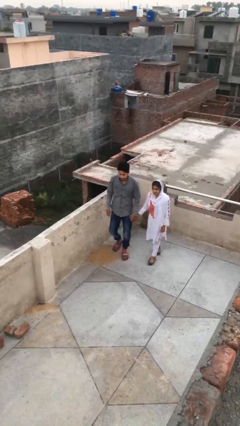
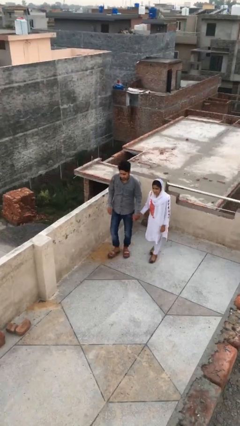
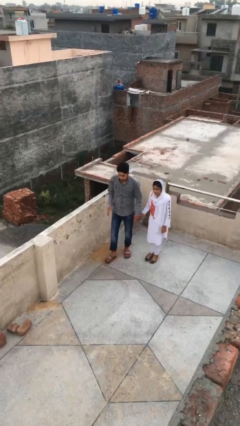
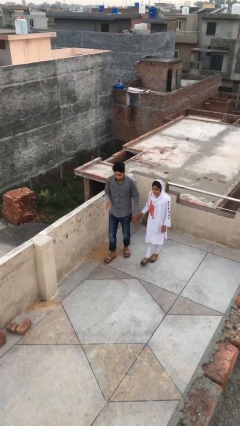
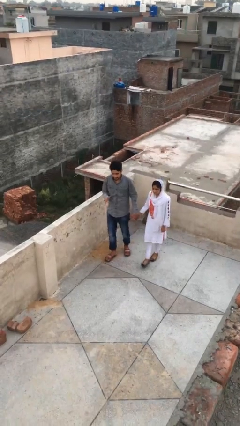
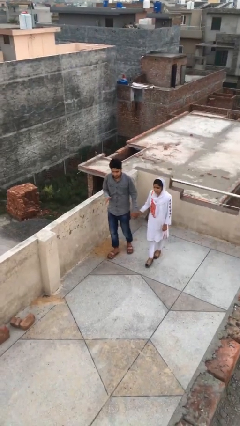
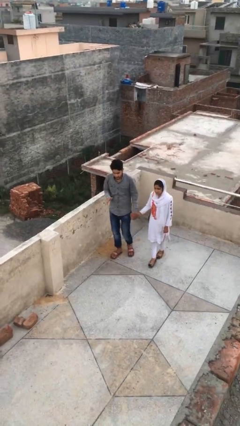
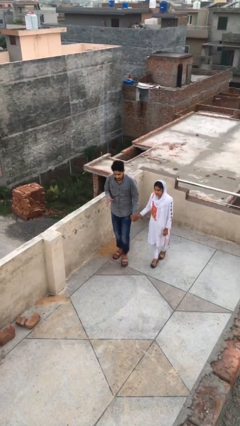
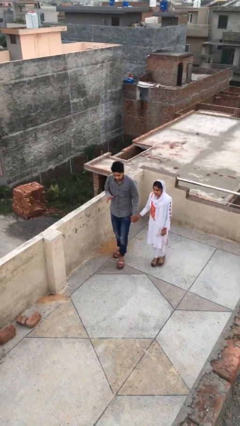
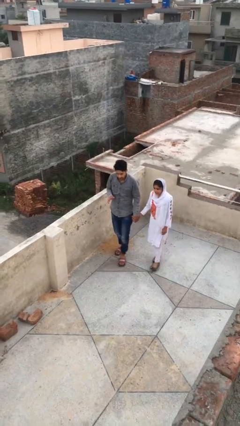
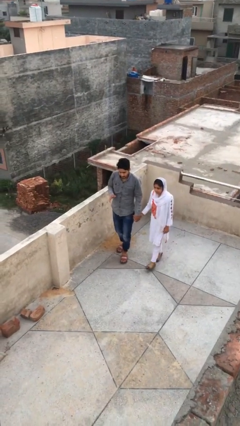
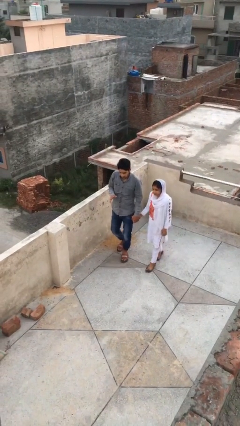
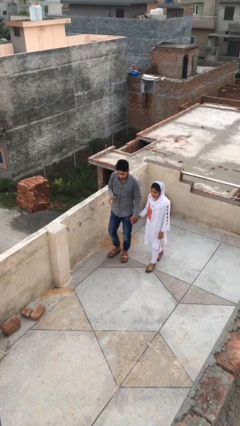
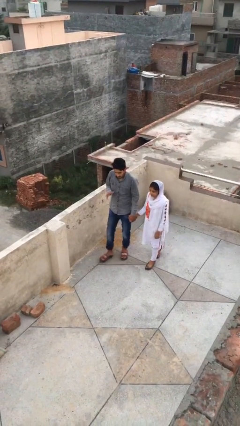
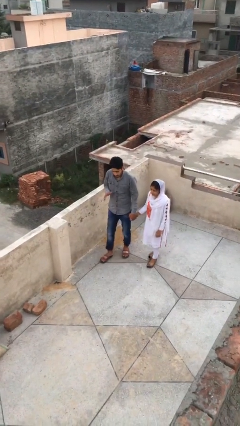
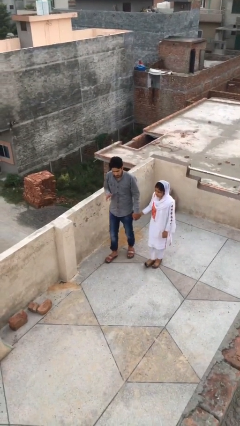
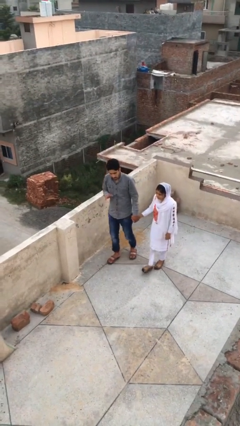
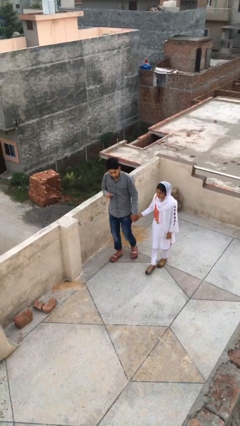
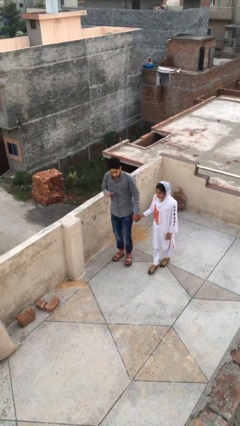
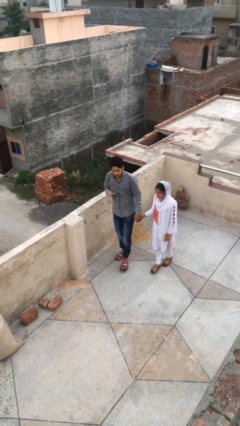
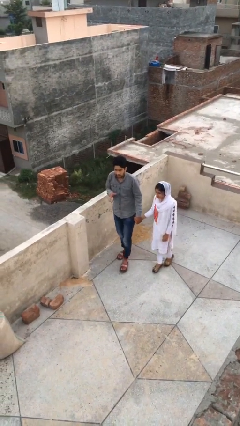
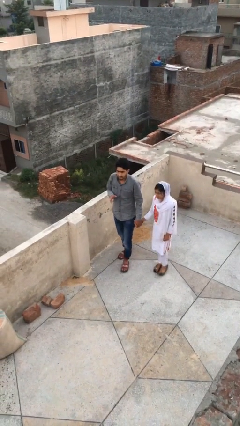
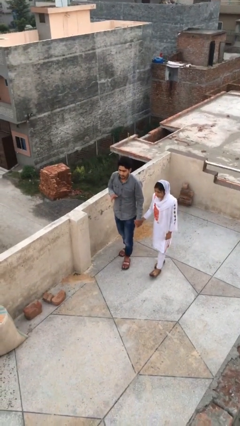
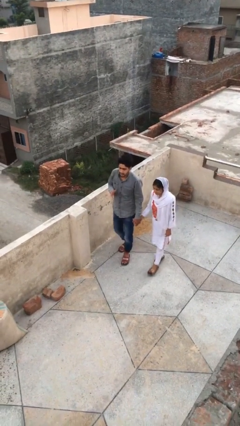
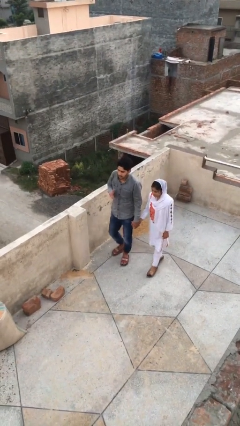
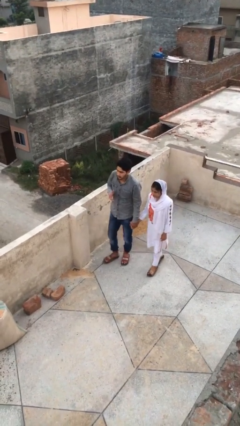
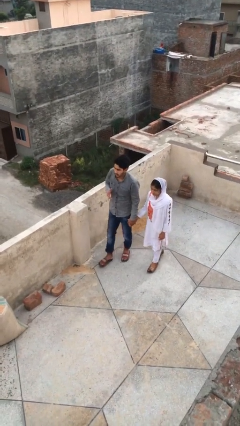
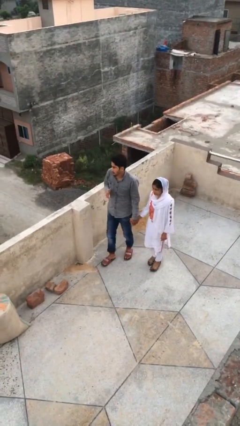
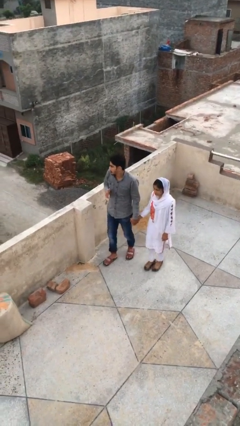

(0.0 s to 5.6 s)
person holds hand

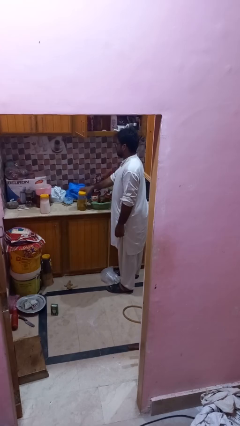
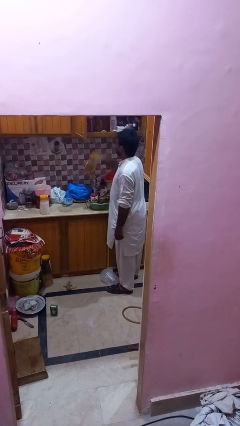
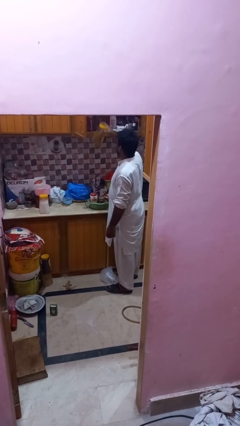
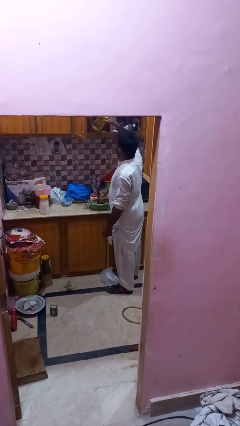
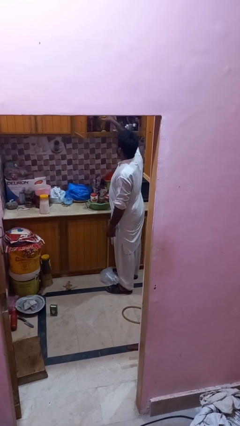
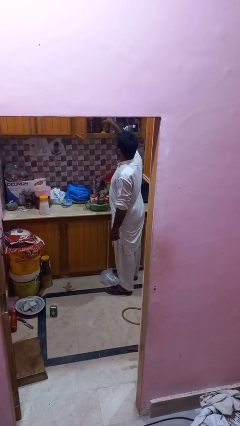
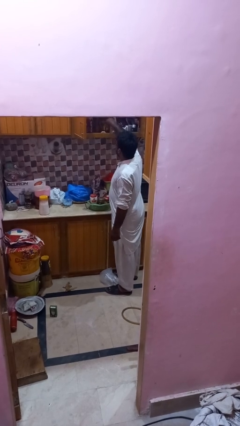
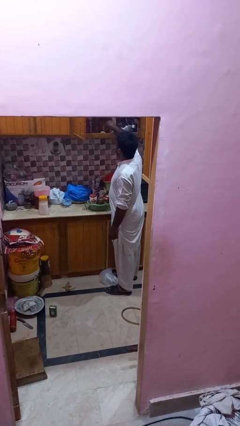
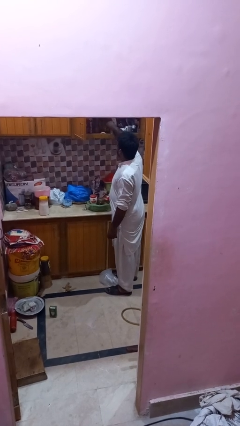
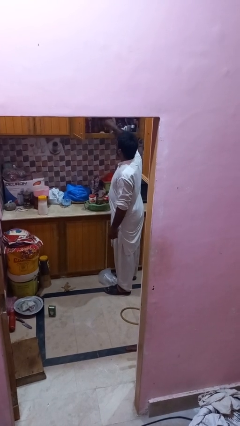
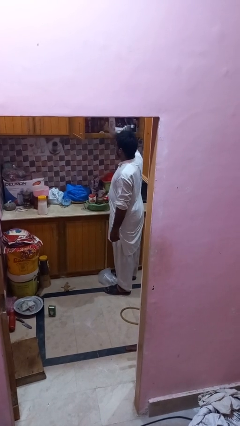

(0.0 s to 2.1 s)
person loads groceries into cabinet

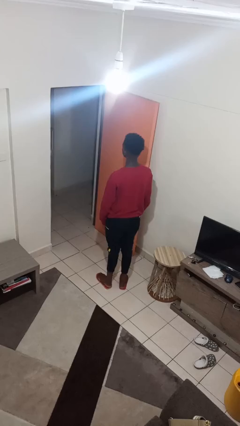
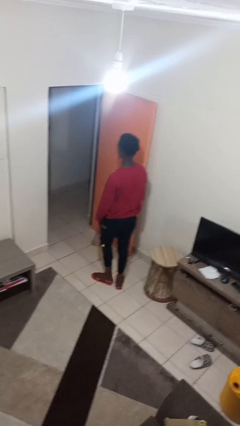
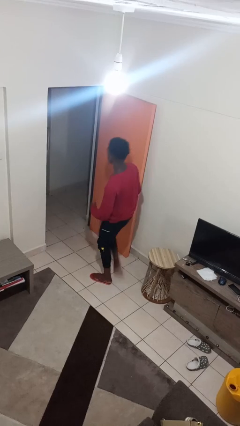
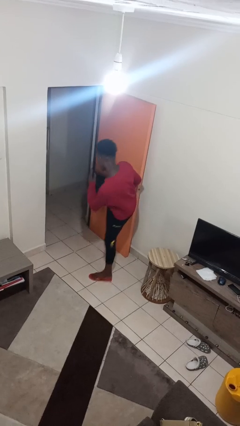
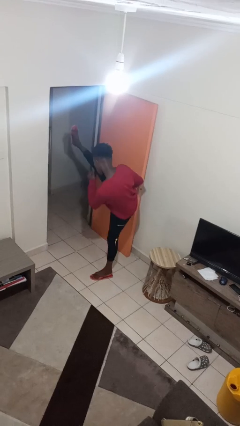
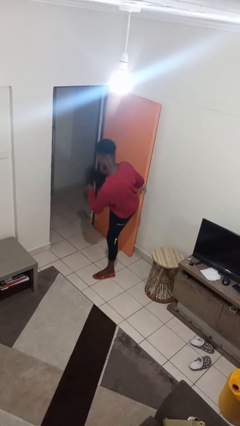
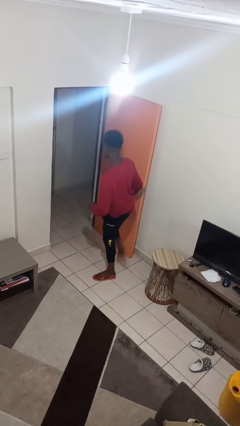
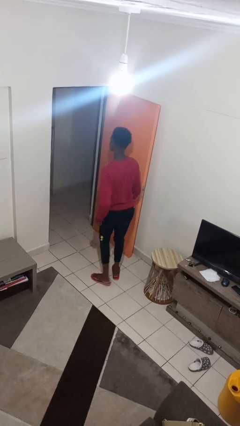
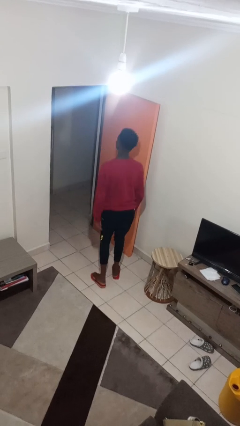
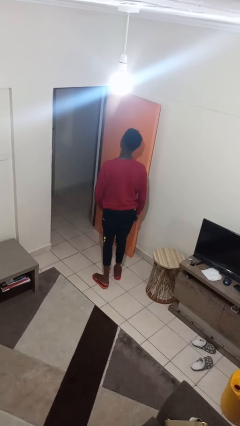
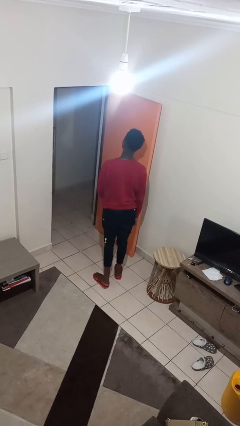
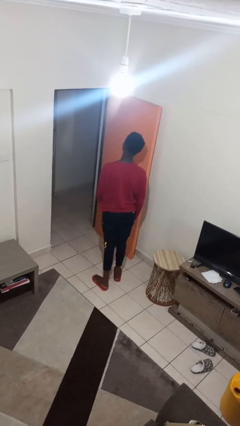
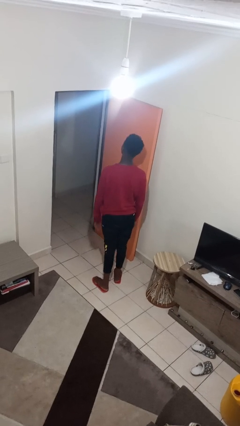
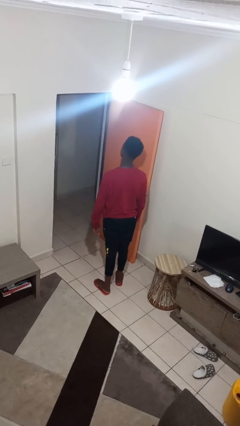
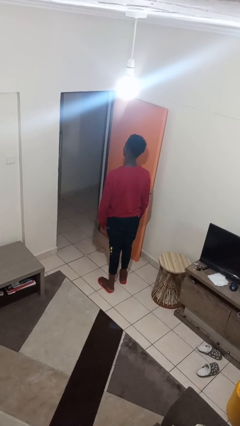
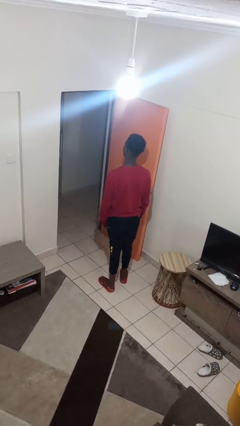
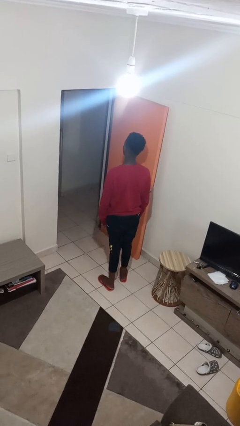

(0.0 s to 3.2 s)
person karate kicks

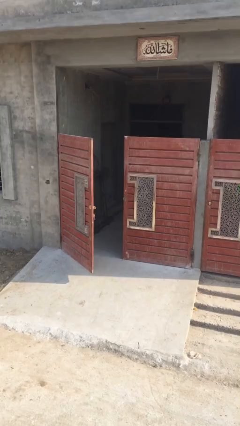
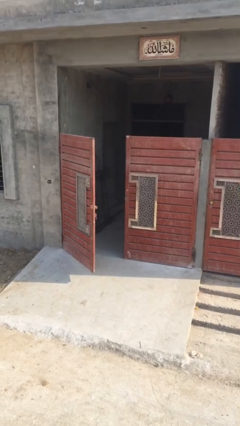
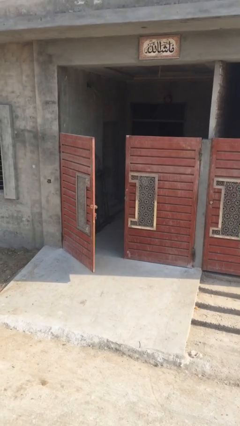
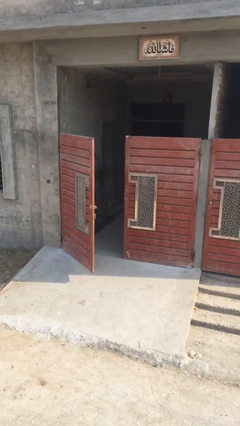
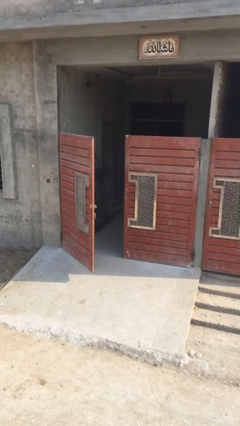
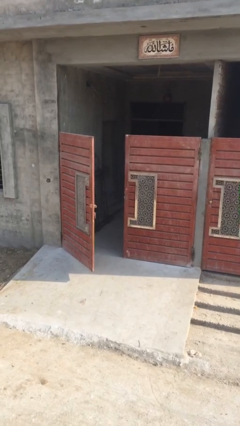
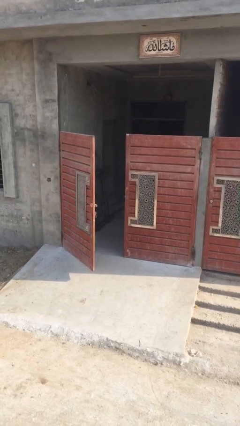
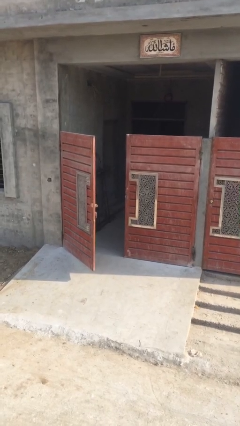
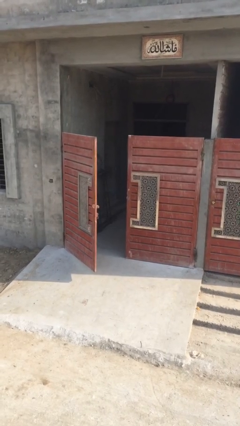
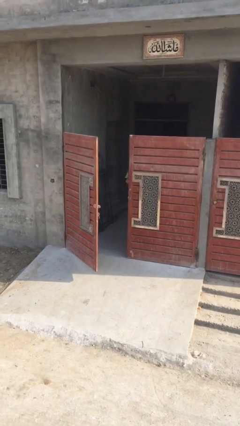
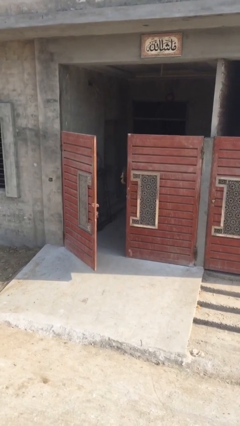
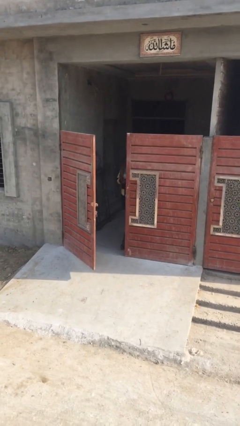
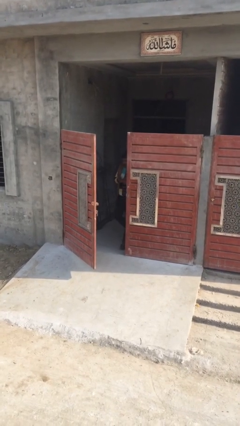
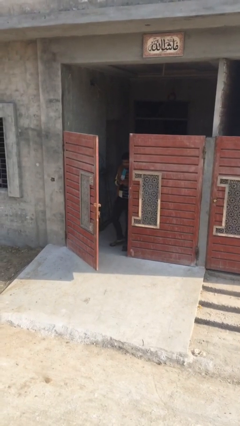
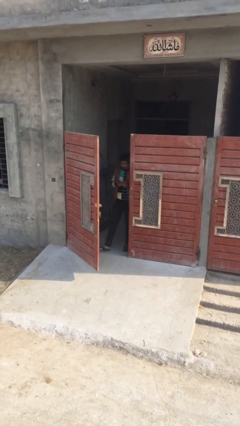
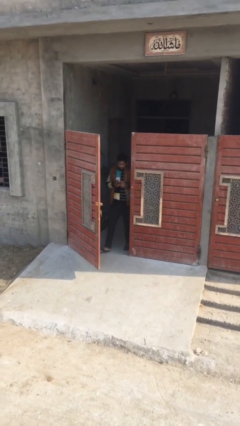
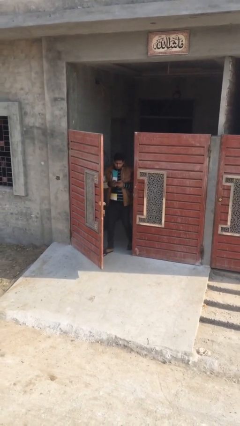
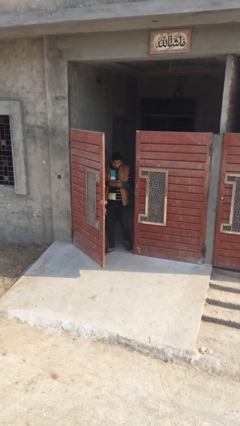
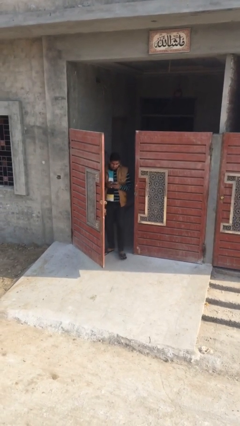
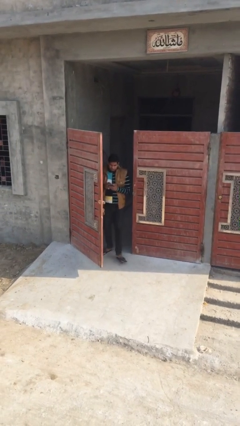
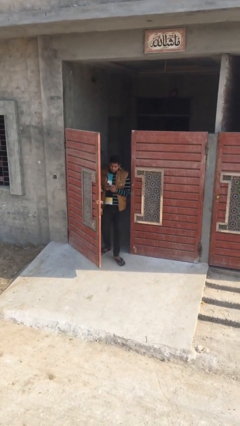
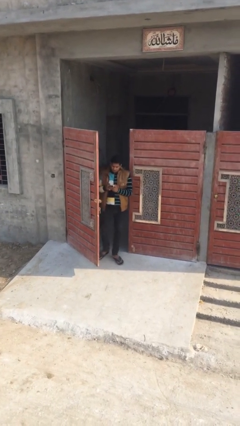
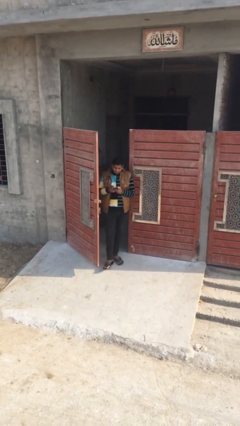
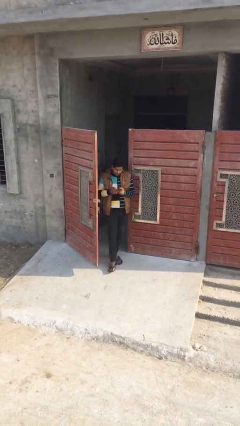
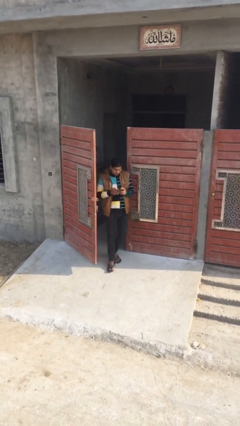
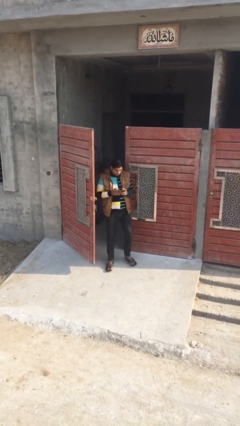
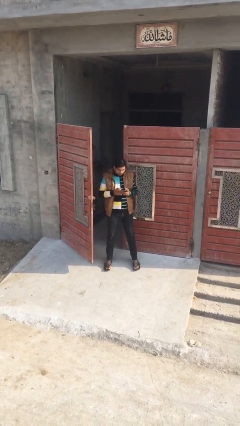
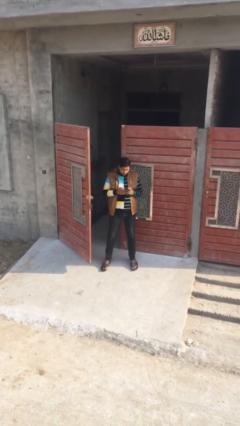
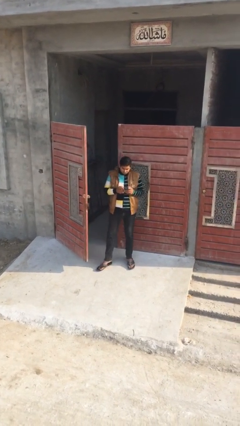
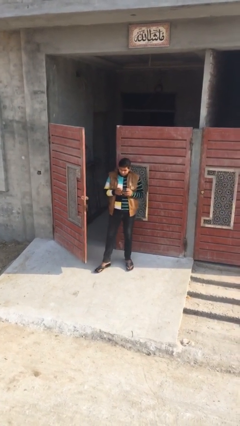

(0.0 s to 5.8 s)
person enters scene through structure

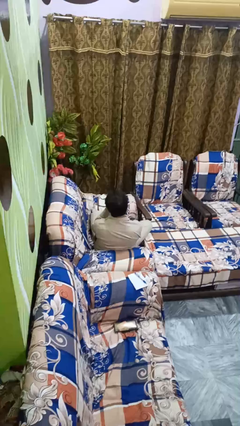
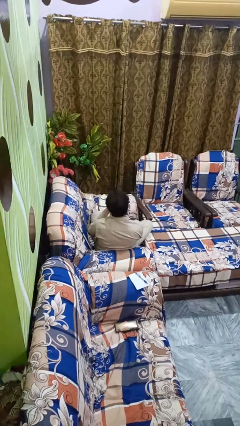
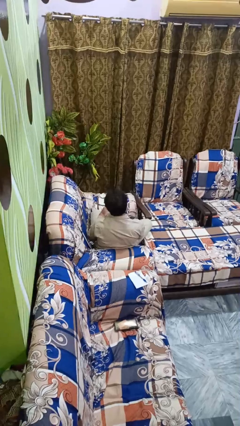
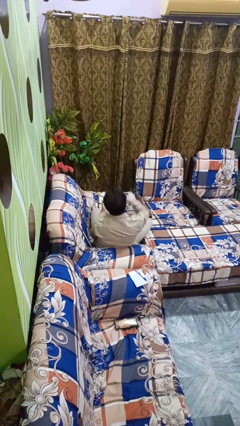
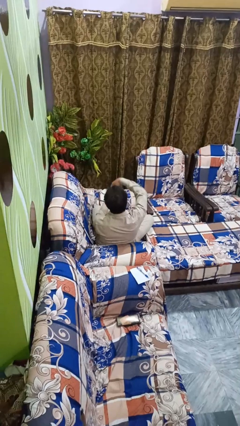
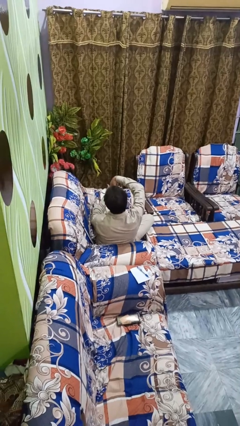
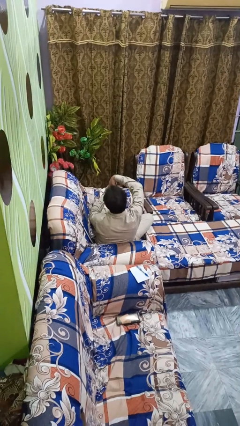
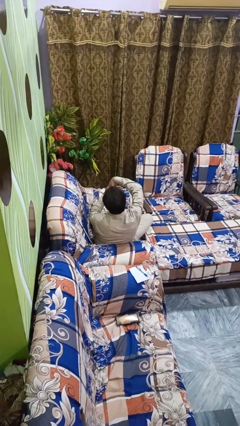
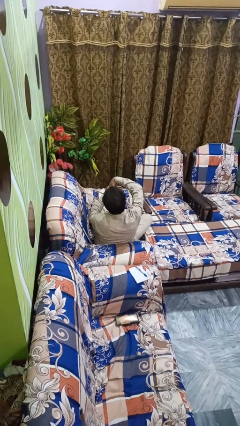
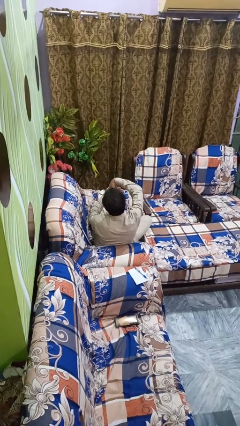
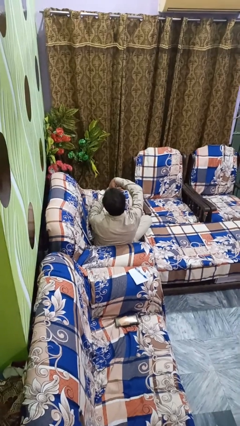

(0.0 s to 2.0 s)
person gestures hang loose
